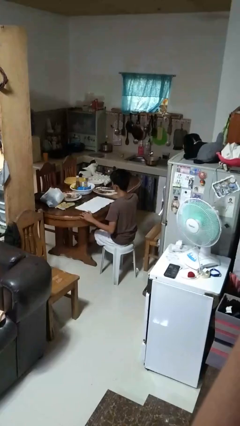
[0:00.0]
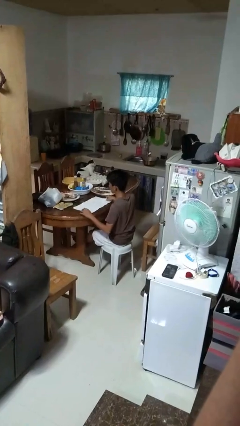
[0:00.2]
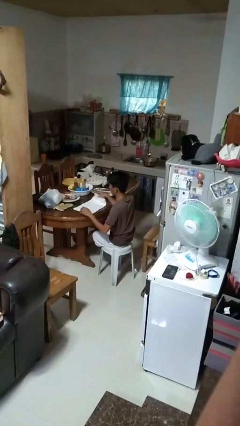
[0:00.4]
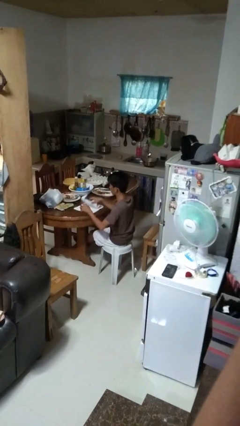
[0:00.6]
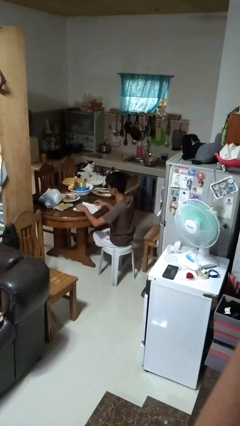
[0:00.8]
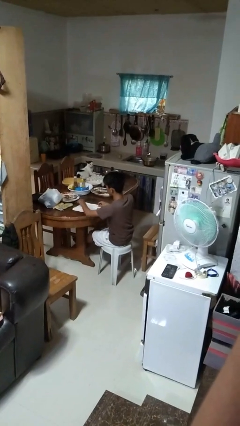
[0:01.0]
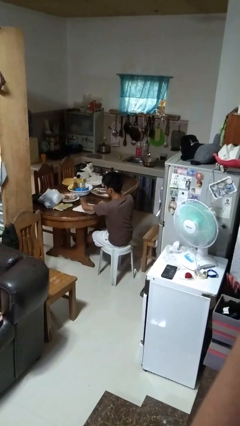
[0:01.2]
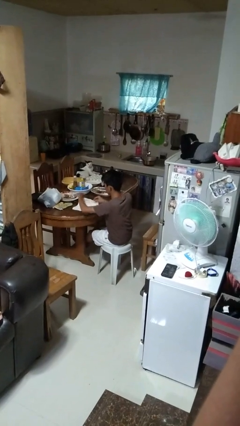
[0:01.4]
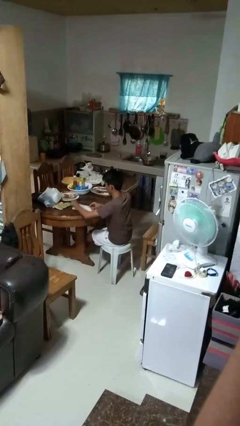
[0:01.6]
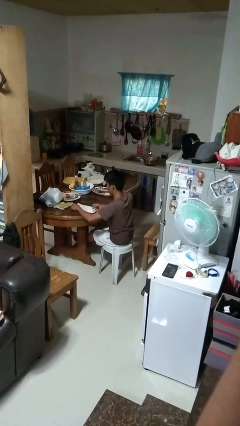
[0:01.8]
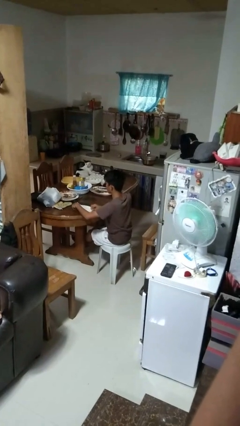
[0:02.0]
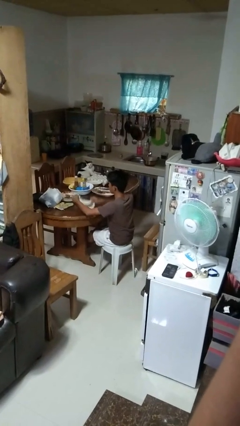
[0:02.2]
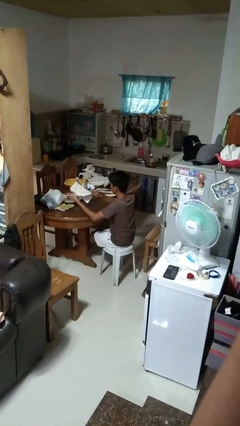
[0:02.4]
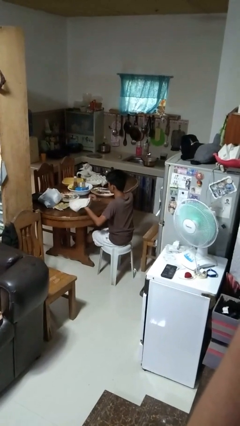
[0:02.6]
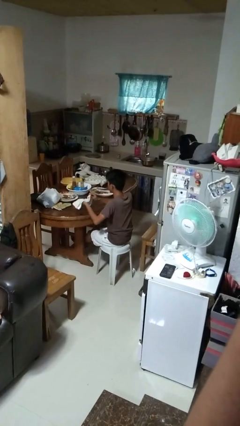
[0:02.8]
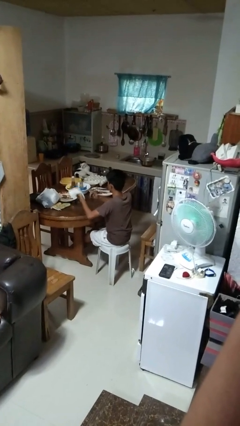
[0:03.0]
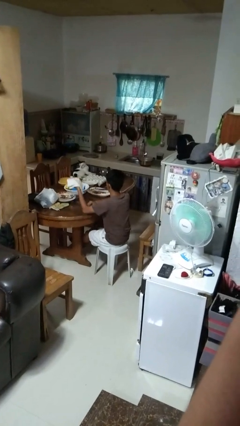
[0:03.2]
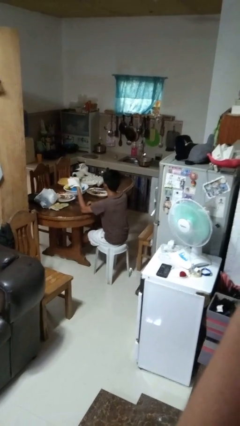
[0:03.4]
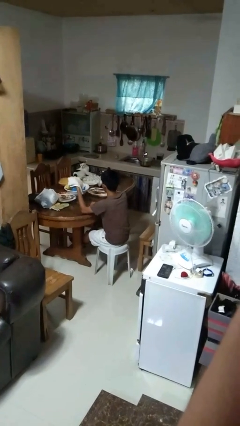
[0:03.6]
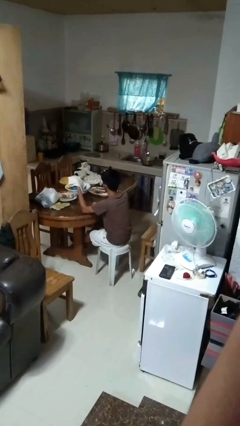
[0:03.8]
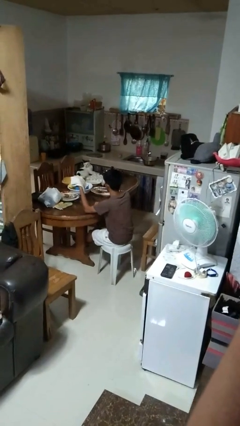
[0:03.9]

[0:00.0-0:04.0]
person folds tablecloth

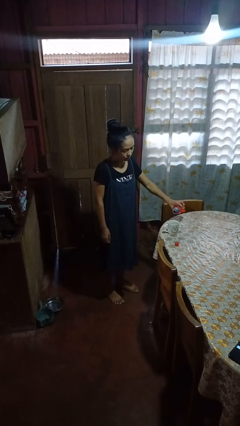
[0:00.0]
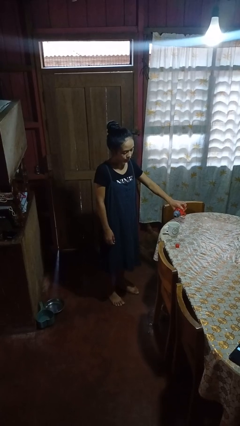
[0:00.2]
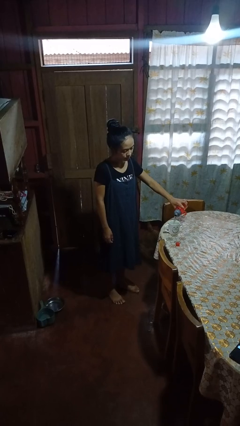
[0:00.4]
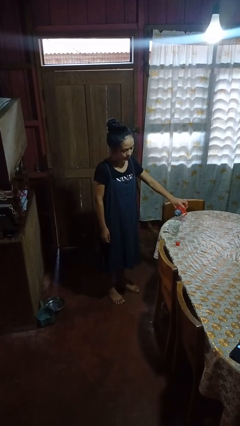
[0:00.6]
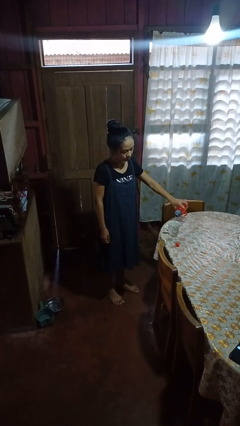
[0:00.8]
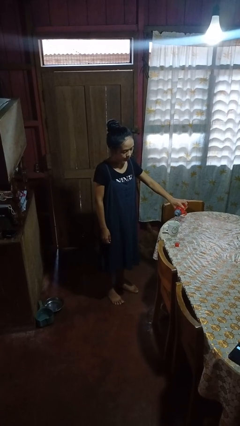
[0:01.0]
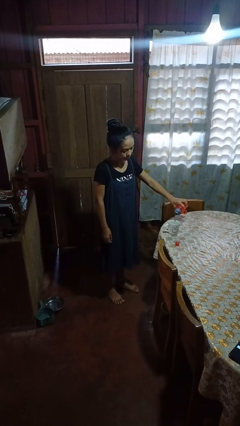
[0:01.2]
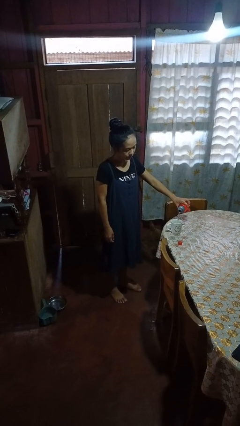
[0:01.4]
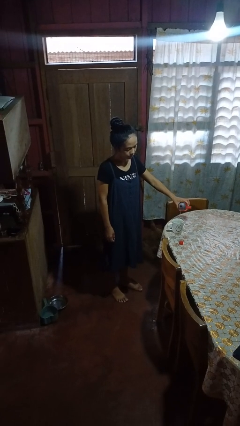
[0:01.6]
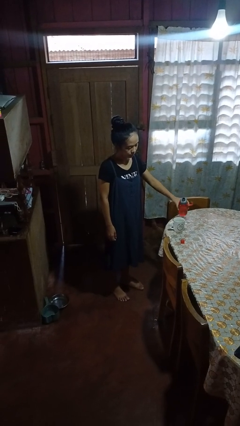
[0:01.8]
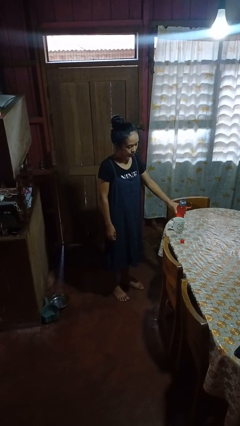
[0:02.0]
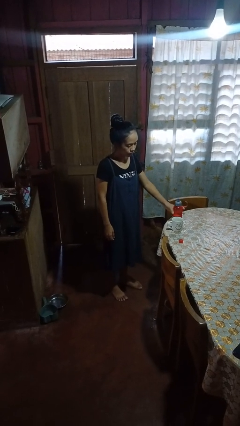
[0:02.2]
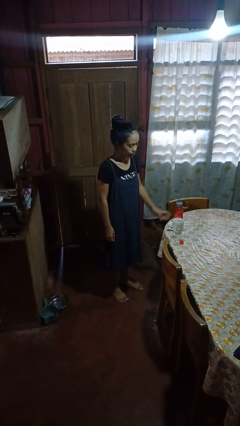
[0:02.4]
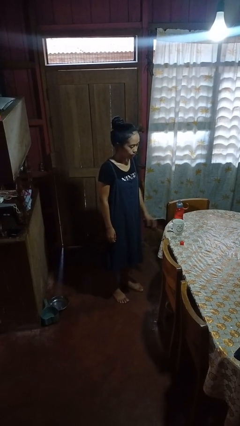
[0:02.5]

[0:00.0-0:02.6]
person pours liquid into cup

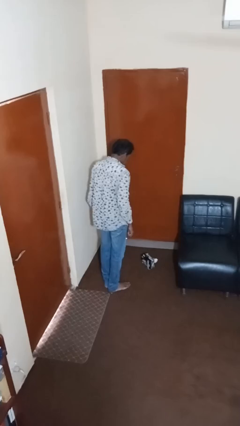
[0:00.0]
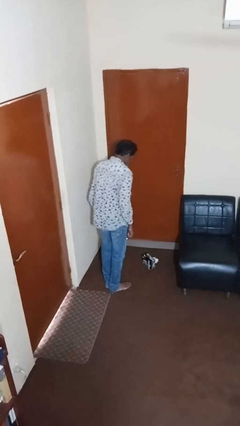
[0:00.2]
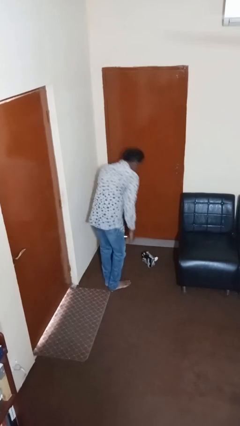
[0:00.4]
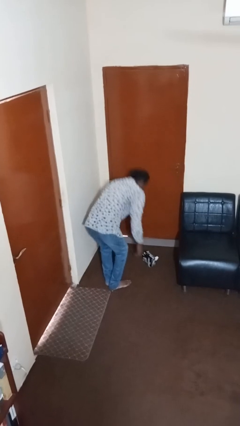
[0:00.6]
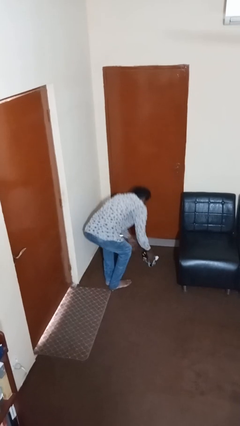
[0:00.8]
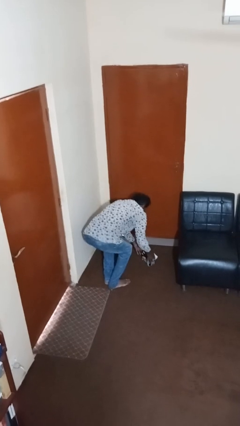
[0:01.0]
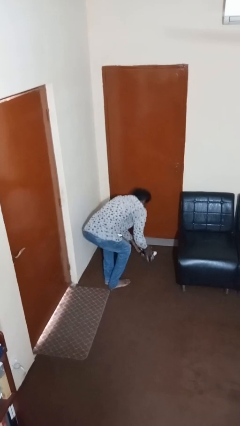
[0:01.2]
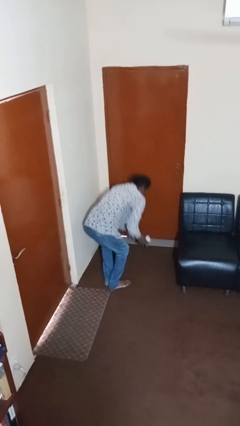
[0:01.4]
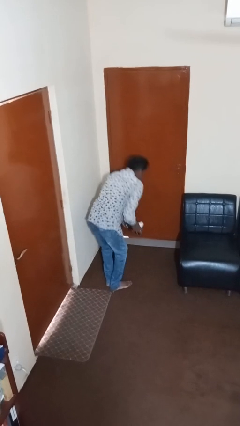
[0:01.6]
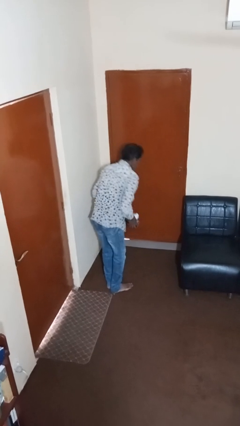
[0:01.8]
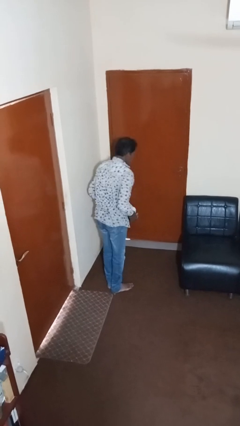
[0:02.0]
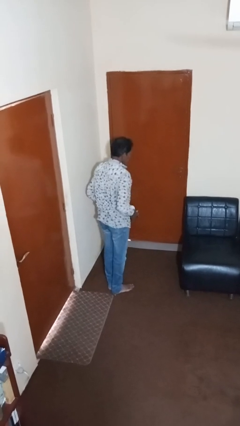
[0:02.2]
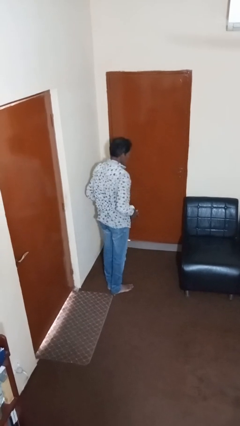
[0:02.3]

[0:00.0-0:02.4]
person picks up object from floor

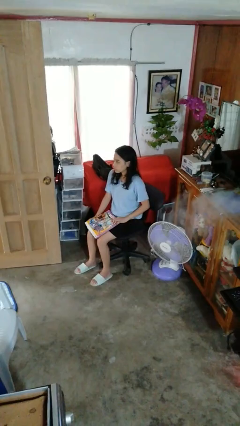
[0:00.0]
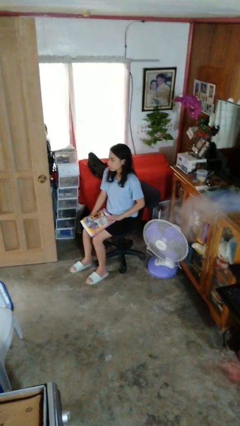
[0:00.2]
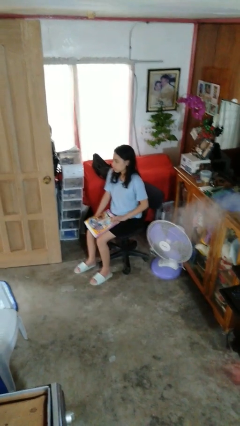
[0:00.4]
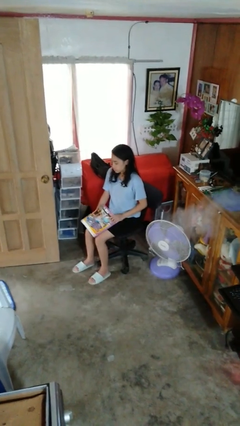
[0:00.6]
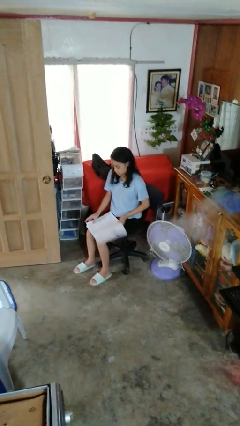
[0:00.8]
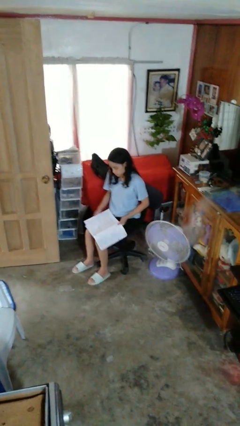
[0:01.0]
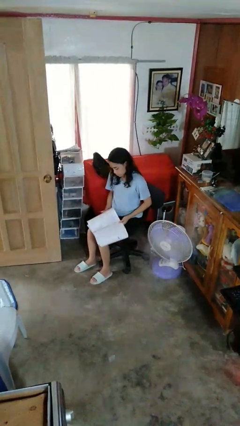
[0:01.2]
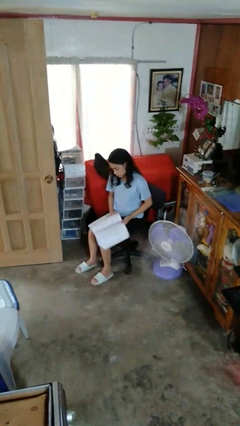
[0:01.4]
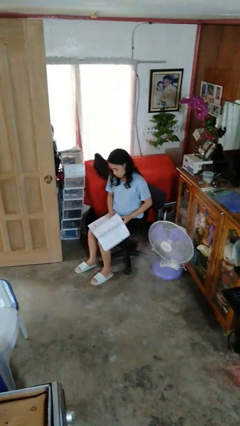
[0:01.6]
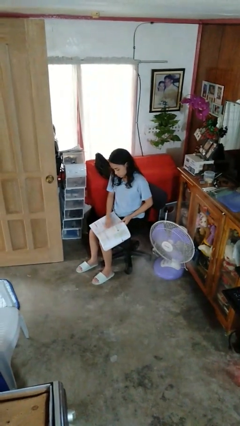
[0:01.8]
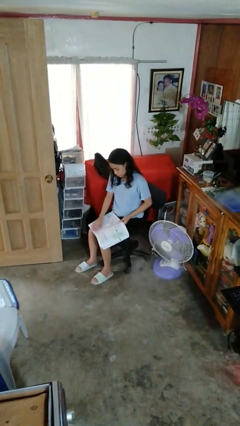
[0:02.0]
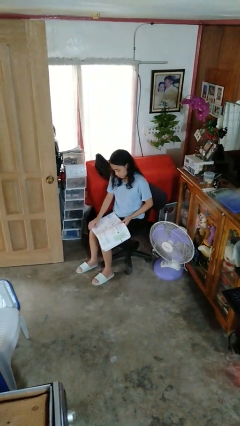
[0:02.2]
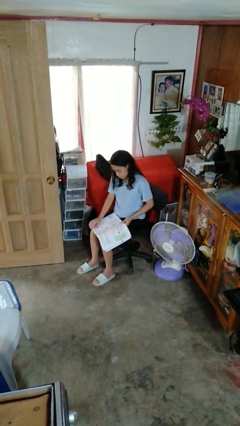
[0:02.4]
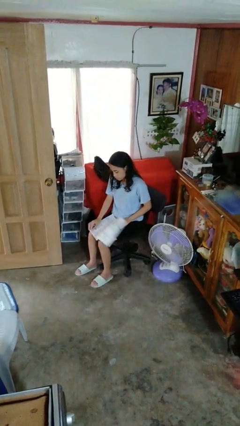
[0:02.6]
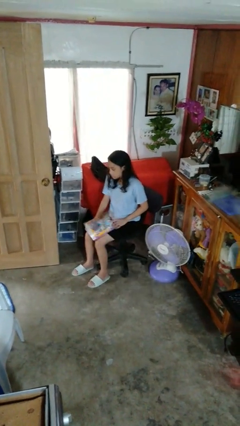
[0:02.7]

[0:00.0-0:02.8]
person reads book

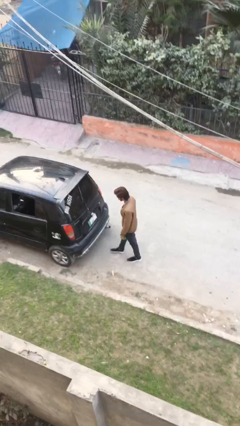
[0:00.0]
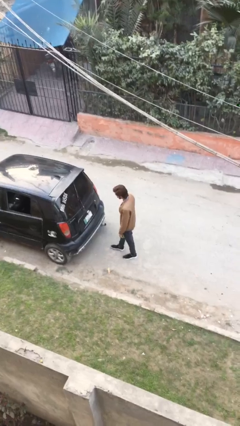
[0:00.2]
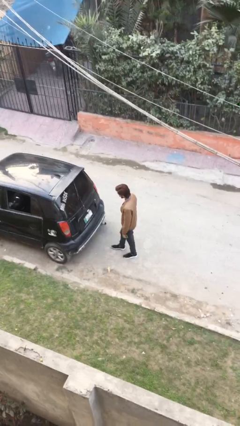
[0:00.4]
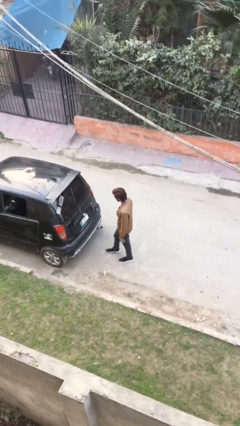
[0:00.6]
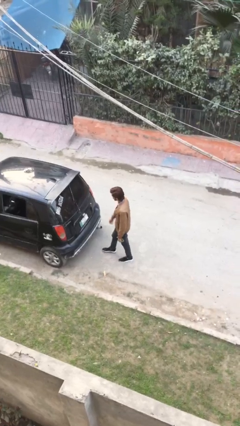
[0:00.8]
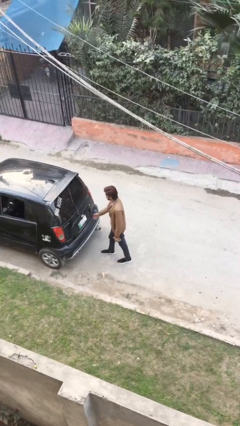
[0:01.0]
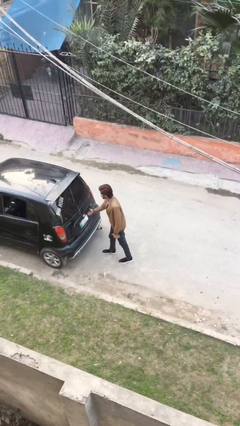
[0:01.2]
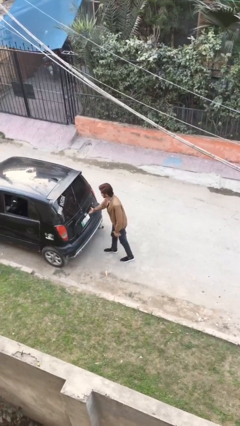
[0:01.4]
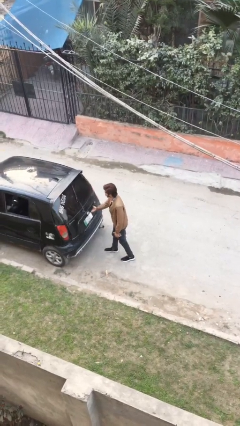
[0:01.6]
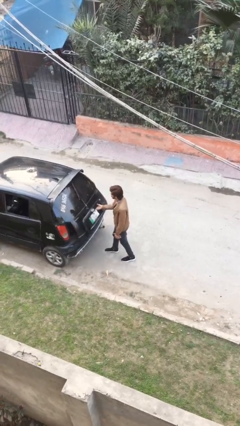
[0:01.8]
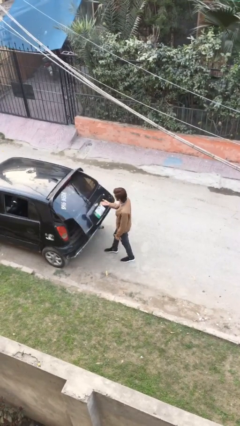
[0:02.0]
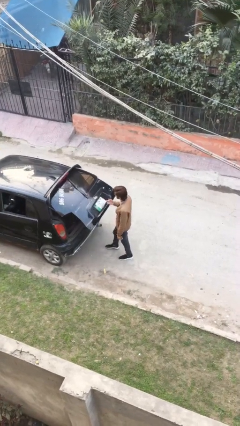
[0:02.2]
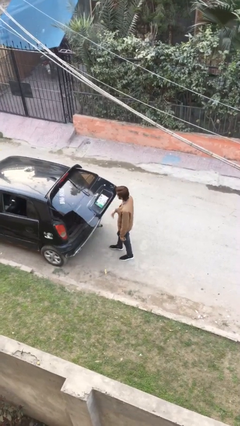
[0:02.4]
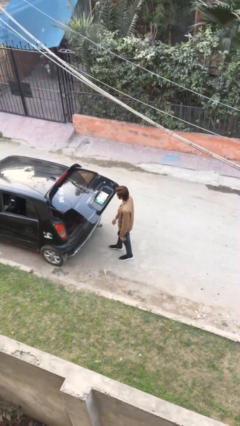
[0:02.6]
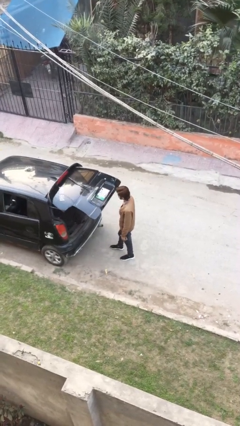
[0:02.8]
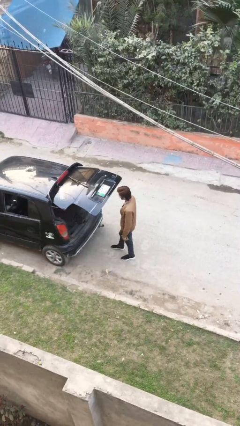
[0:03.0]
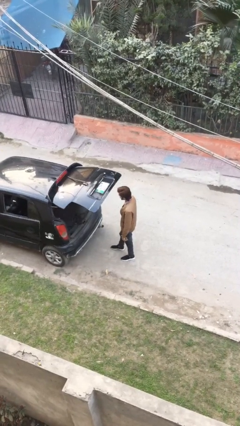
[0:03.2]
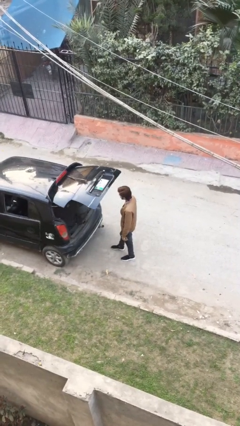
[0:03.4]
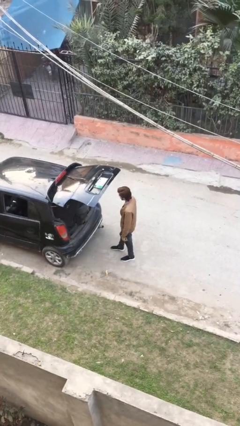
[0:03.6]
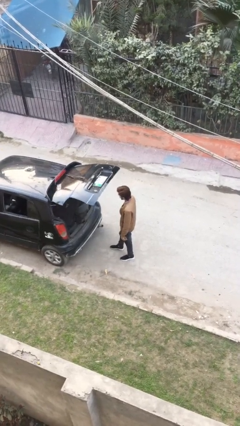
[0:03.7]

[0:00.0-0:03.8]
person opens car trunk

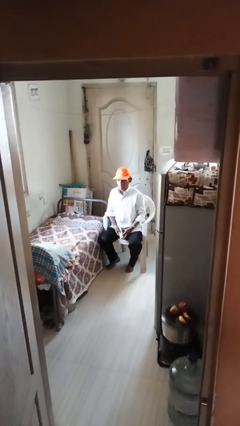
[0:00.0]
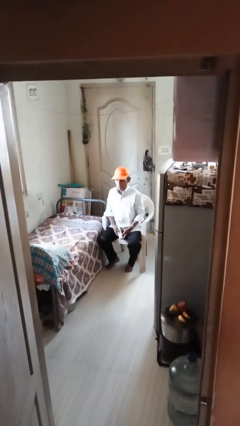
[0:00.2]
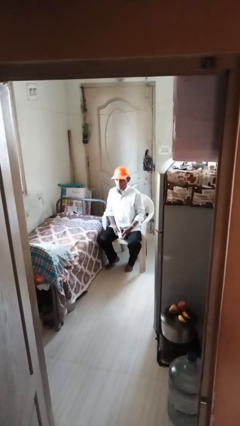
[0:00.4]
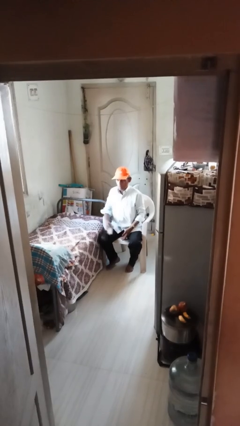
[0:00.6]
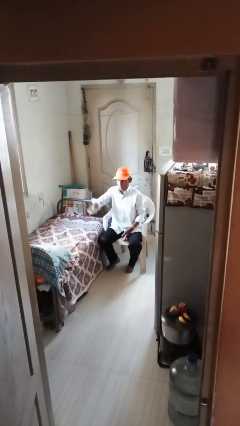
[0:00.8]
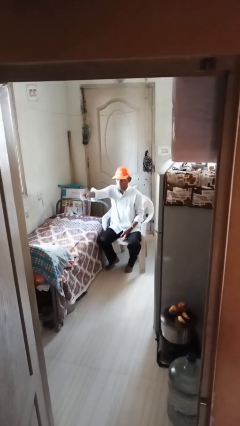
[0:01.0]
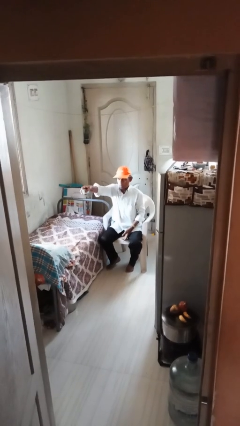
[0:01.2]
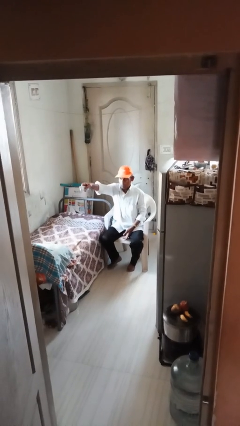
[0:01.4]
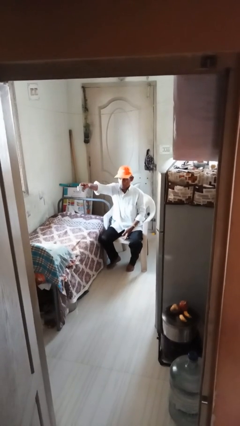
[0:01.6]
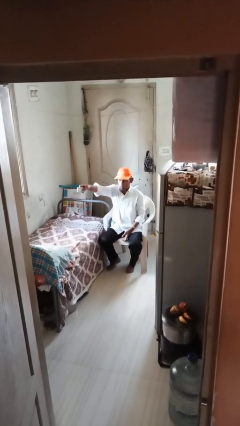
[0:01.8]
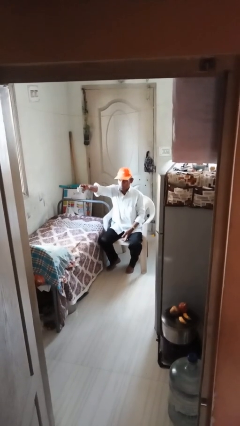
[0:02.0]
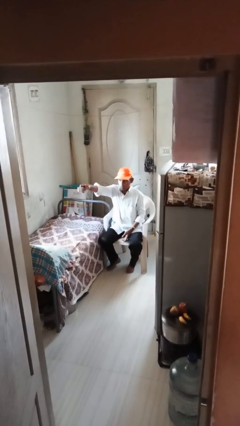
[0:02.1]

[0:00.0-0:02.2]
person uses television remote
